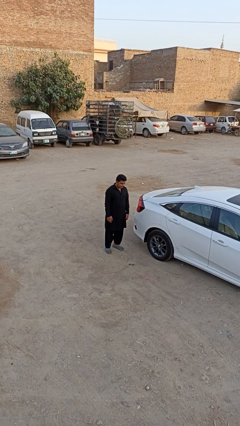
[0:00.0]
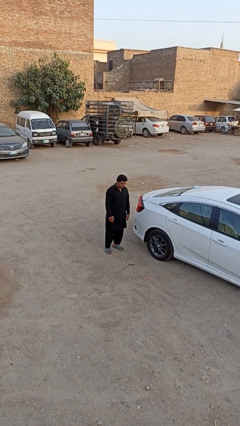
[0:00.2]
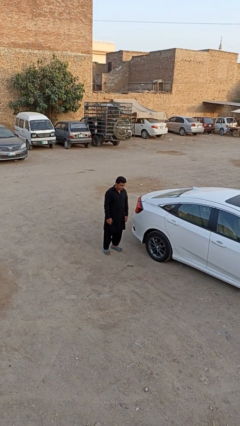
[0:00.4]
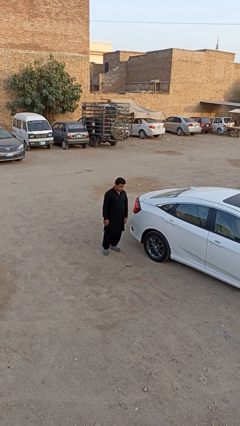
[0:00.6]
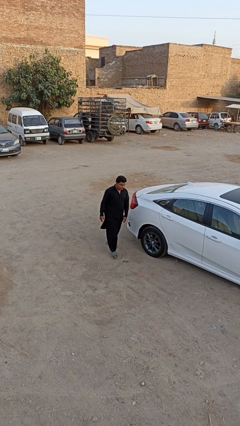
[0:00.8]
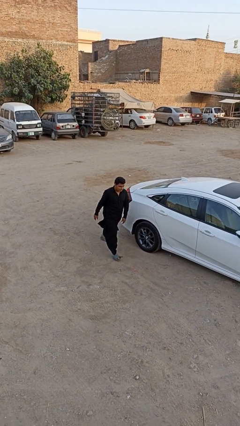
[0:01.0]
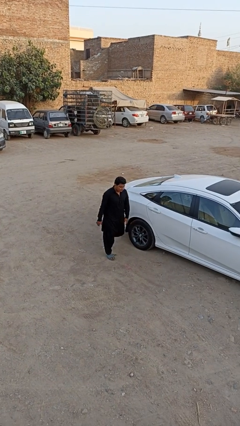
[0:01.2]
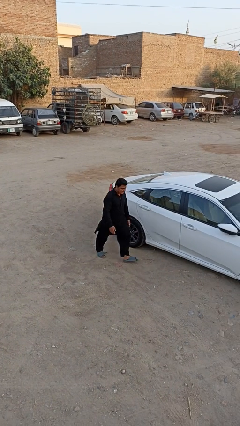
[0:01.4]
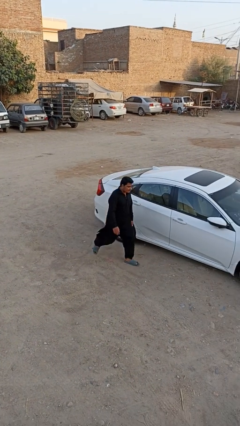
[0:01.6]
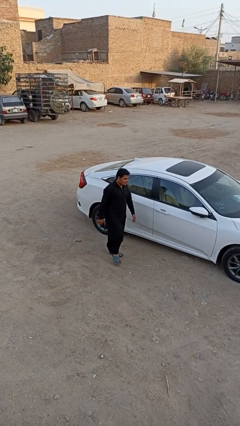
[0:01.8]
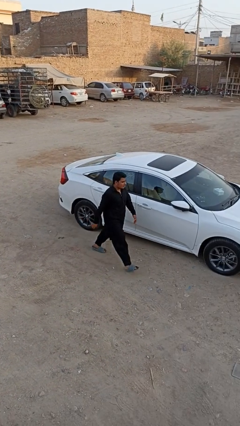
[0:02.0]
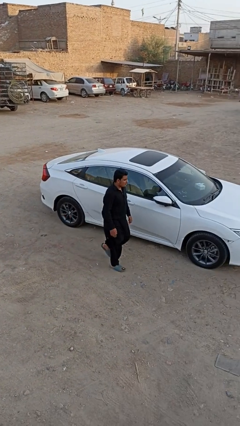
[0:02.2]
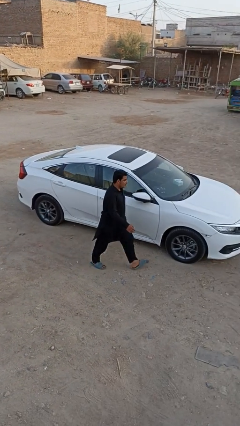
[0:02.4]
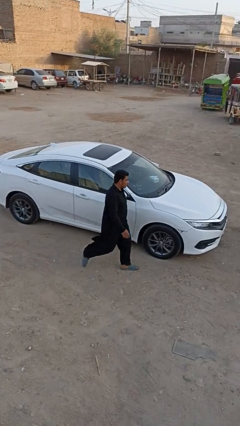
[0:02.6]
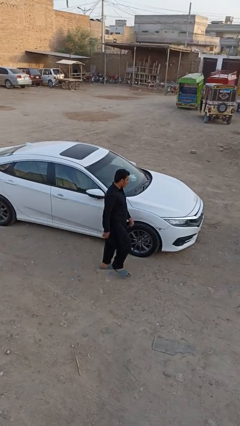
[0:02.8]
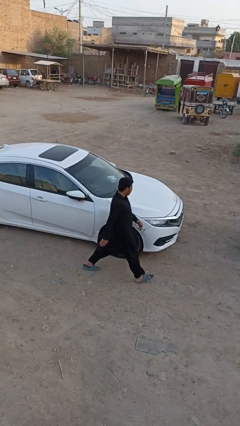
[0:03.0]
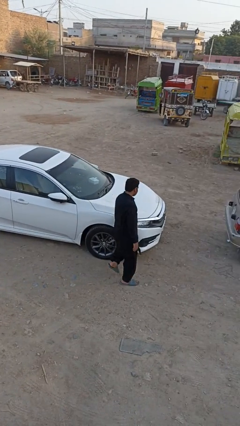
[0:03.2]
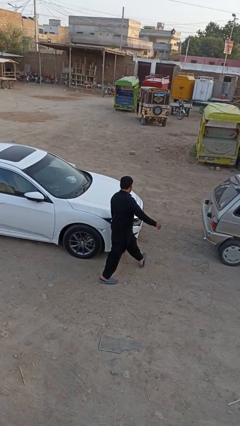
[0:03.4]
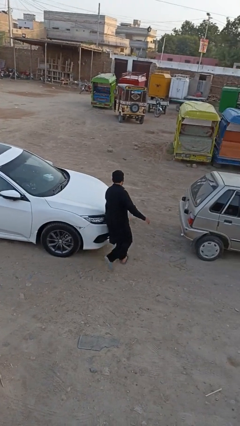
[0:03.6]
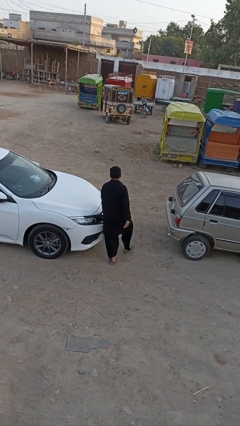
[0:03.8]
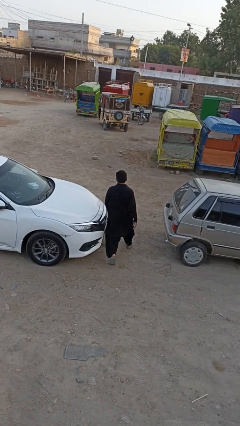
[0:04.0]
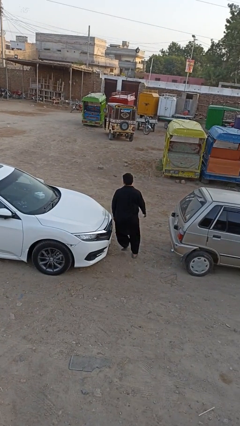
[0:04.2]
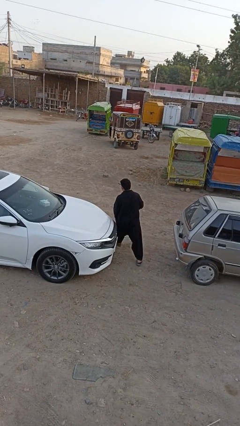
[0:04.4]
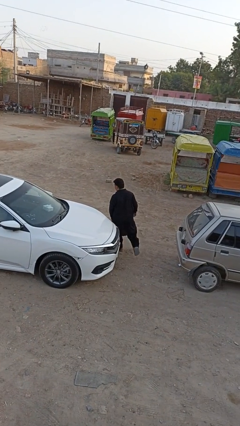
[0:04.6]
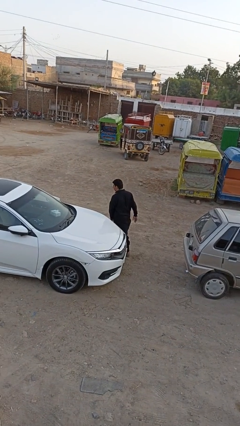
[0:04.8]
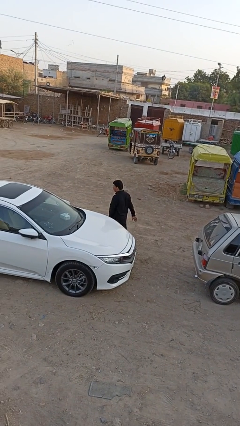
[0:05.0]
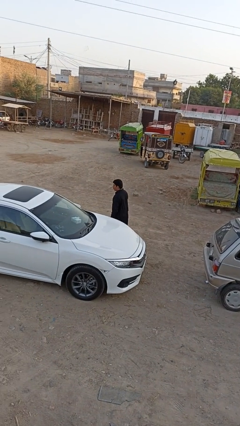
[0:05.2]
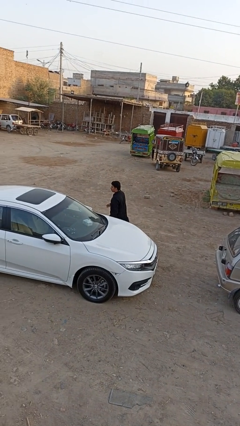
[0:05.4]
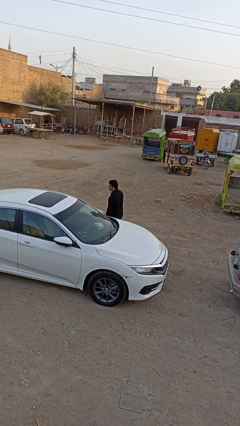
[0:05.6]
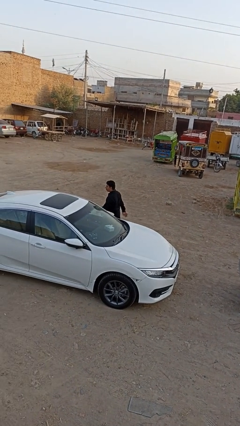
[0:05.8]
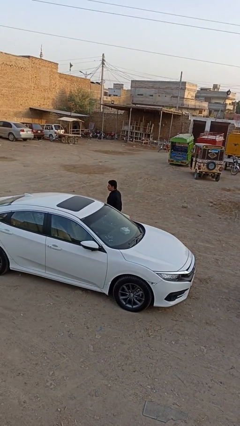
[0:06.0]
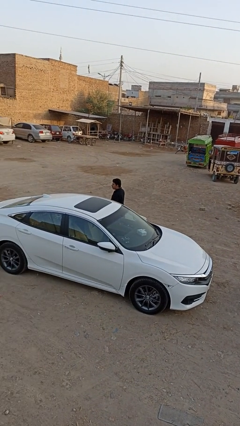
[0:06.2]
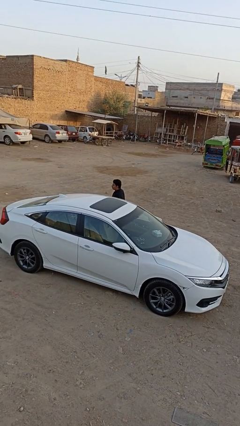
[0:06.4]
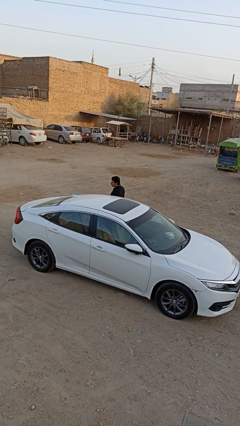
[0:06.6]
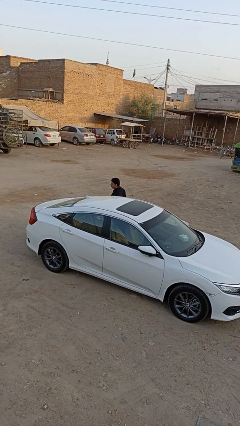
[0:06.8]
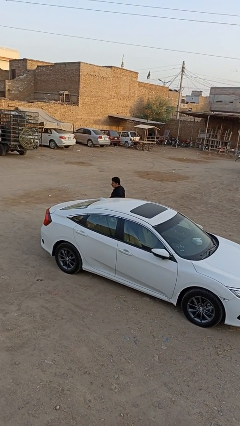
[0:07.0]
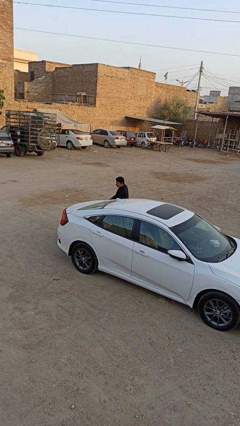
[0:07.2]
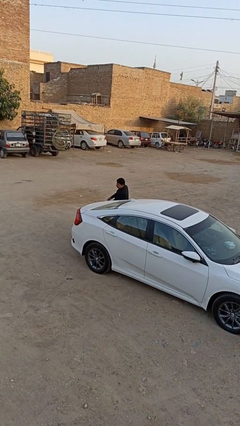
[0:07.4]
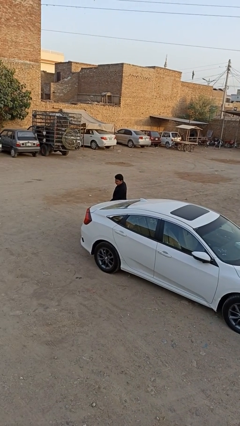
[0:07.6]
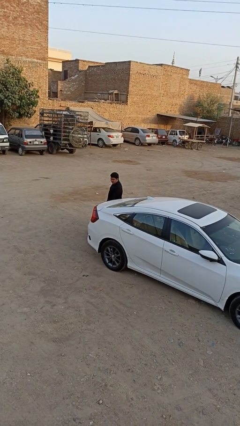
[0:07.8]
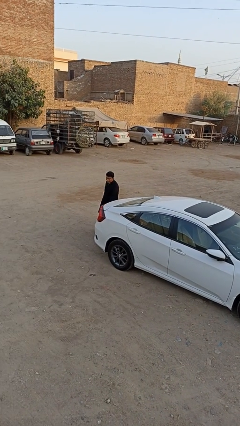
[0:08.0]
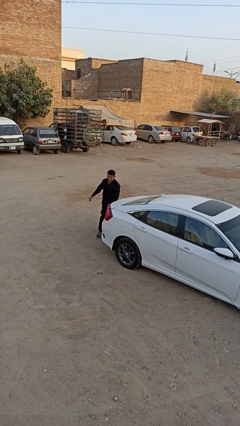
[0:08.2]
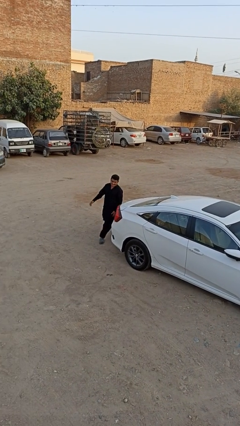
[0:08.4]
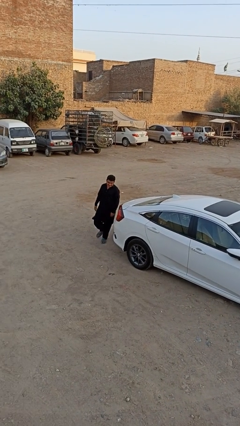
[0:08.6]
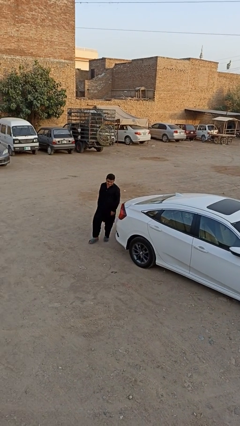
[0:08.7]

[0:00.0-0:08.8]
person walks around car

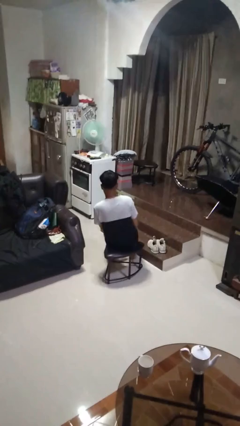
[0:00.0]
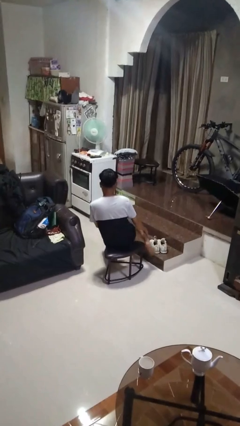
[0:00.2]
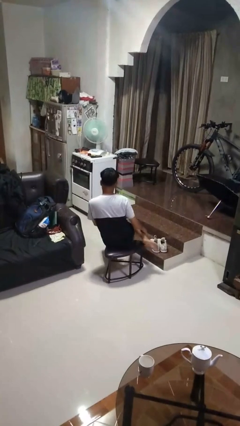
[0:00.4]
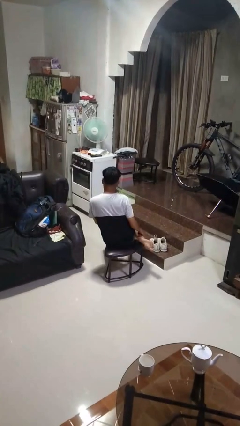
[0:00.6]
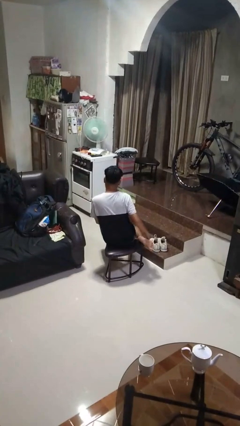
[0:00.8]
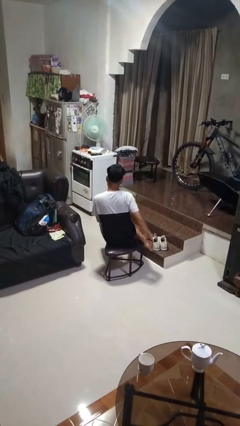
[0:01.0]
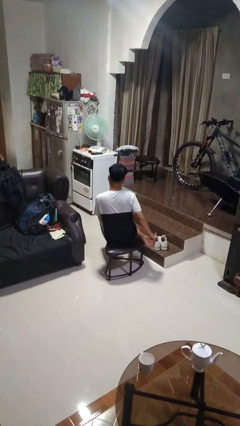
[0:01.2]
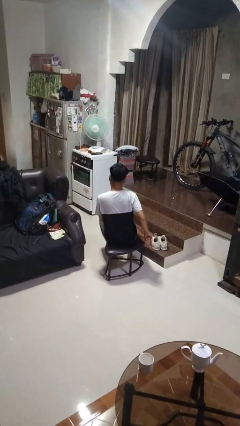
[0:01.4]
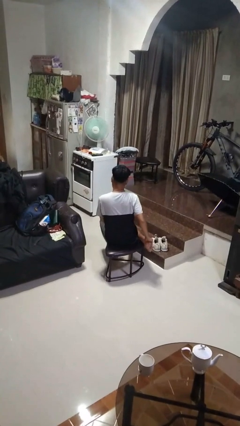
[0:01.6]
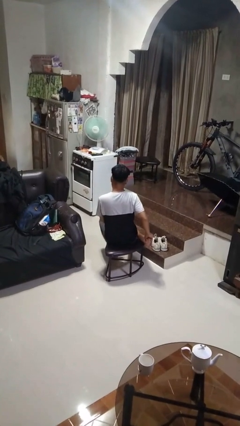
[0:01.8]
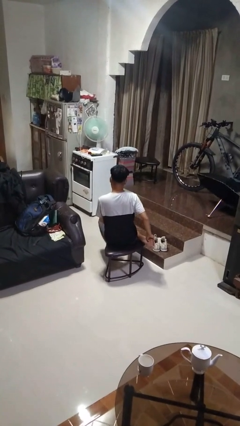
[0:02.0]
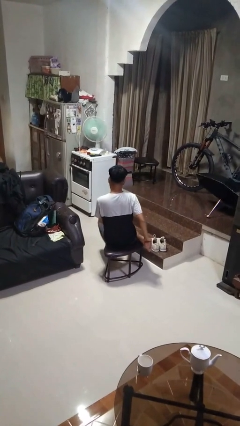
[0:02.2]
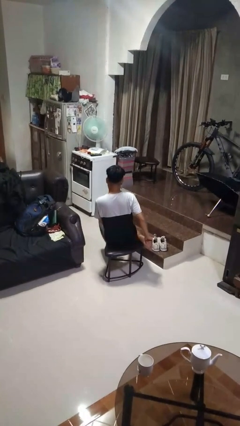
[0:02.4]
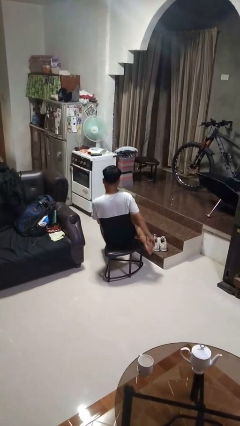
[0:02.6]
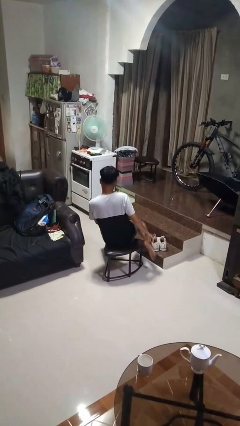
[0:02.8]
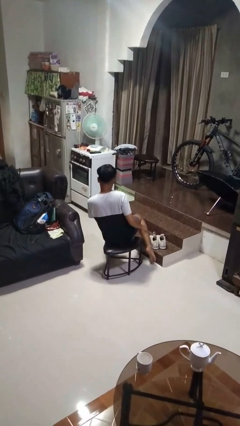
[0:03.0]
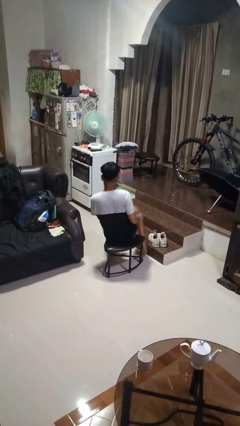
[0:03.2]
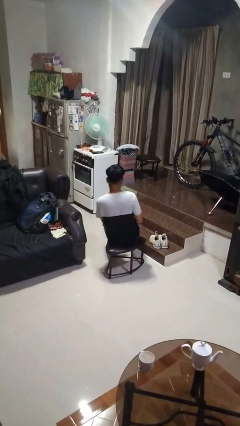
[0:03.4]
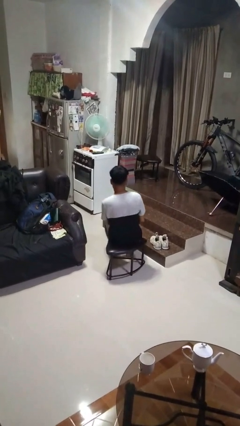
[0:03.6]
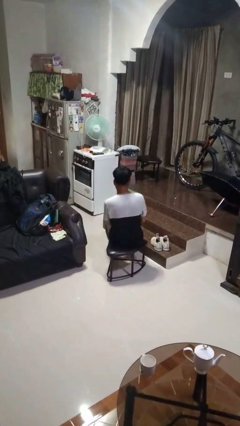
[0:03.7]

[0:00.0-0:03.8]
person rubs foot

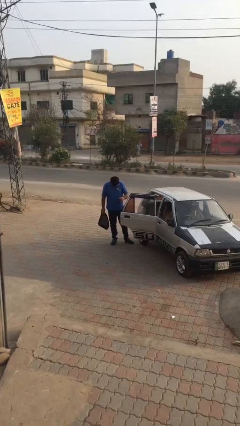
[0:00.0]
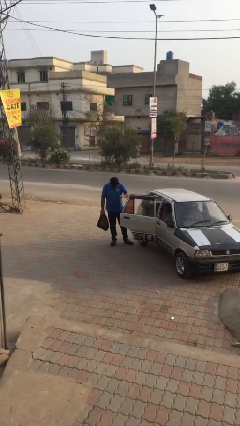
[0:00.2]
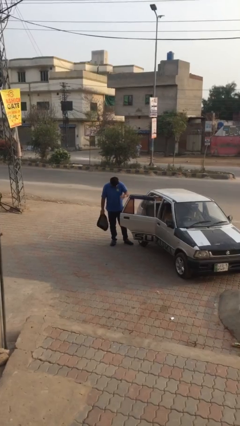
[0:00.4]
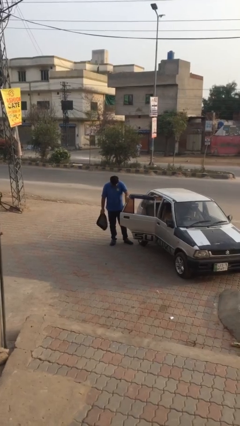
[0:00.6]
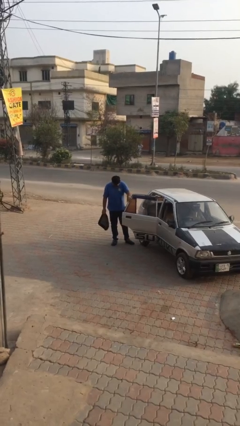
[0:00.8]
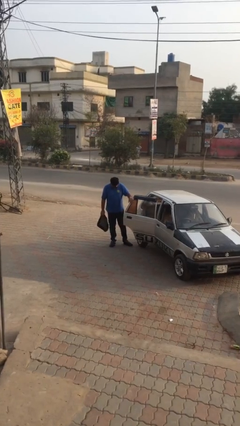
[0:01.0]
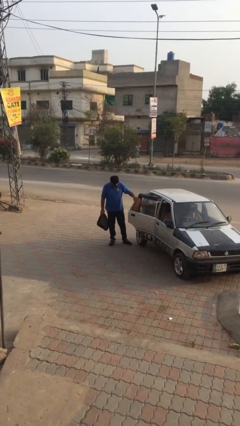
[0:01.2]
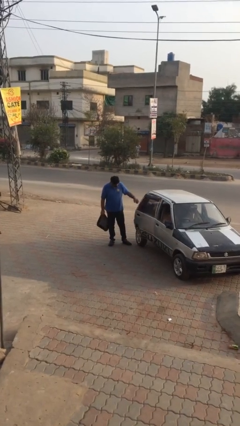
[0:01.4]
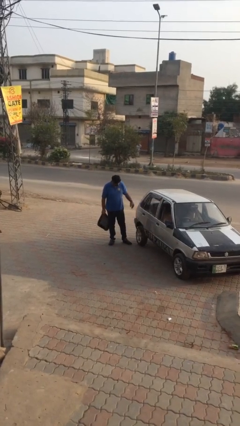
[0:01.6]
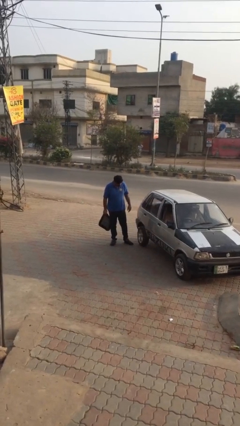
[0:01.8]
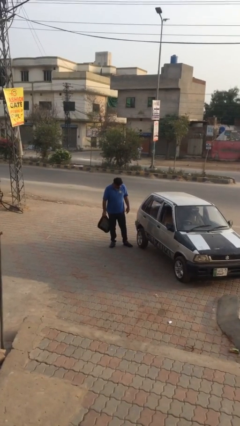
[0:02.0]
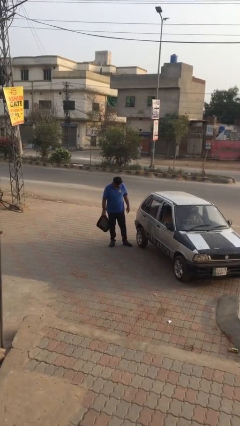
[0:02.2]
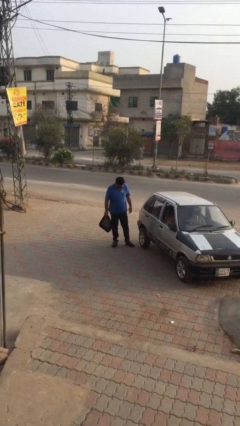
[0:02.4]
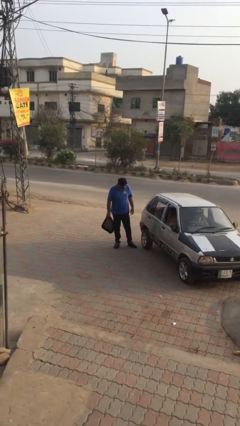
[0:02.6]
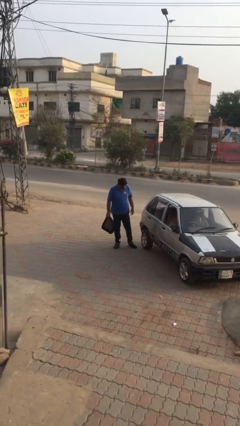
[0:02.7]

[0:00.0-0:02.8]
person closes car door

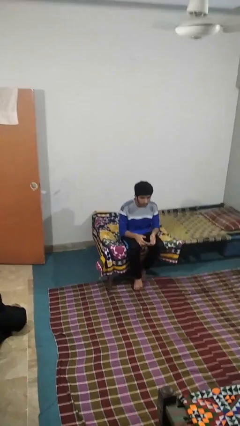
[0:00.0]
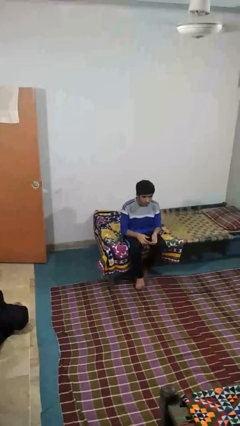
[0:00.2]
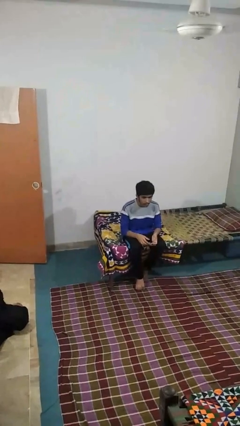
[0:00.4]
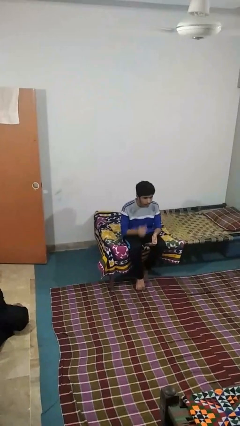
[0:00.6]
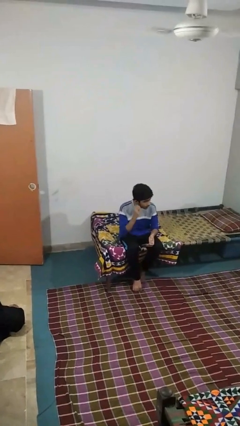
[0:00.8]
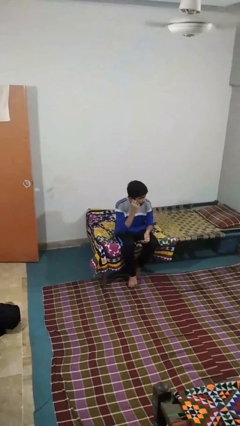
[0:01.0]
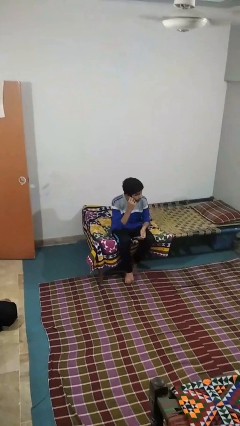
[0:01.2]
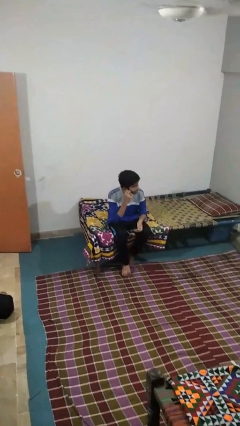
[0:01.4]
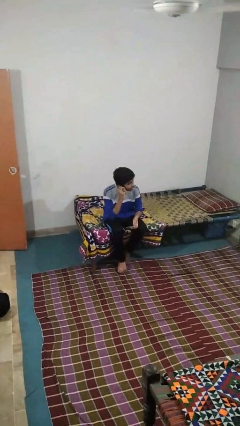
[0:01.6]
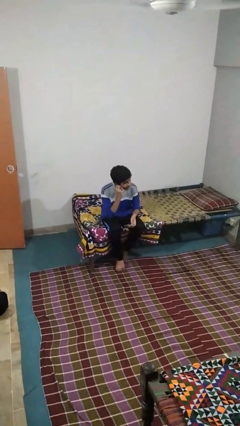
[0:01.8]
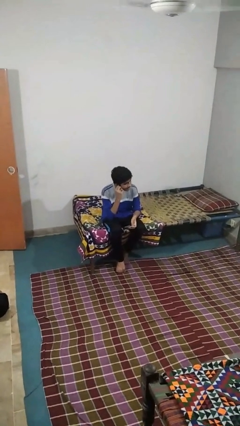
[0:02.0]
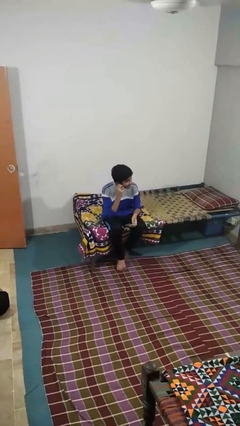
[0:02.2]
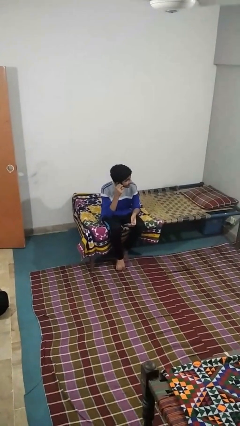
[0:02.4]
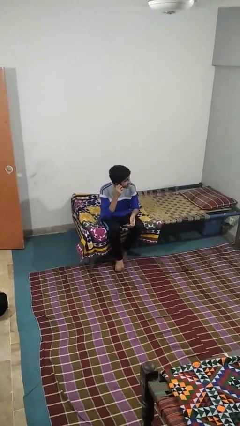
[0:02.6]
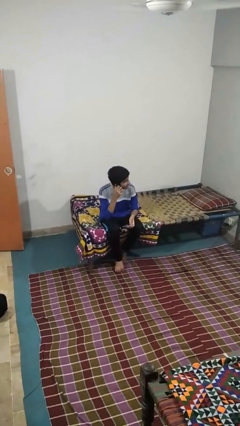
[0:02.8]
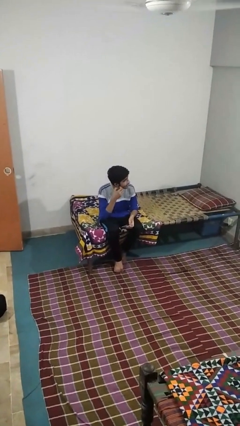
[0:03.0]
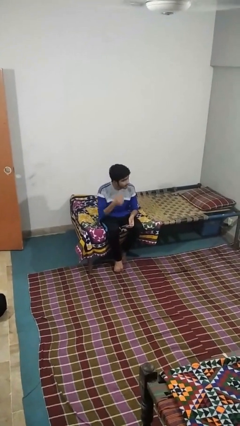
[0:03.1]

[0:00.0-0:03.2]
person touches earlobe
